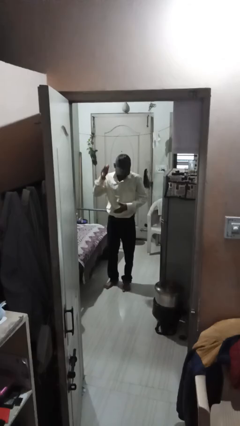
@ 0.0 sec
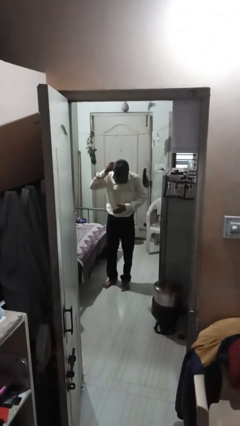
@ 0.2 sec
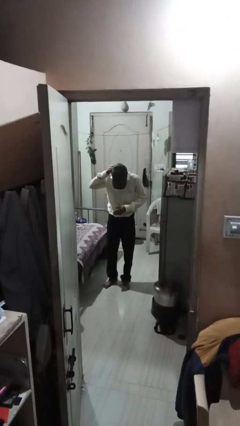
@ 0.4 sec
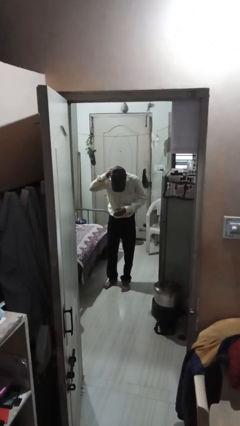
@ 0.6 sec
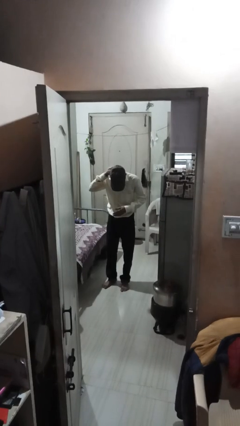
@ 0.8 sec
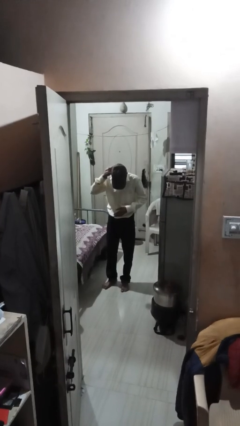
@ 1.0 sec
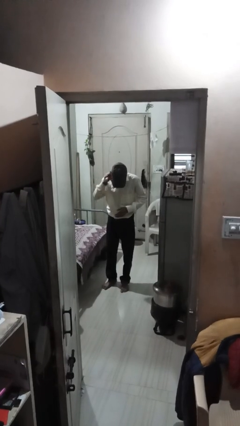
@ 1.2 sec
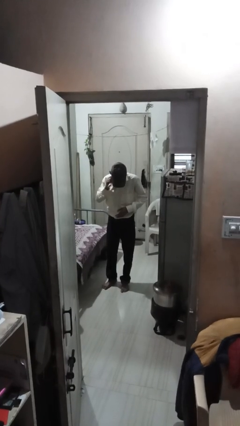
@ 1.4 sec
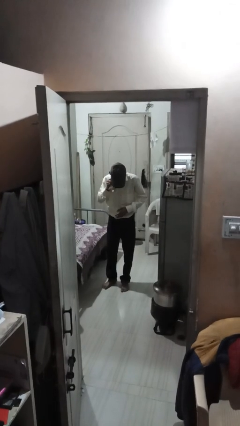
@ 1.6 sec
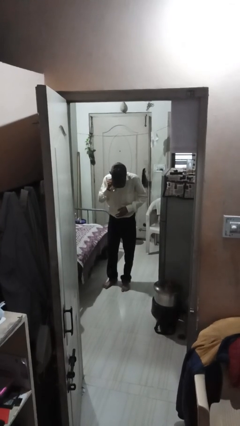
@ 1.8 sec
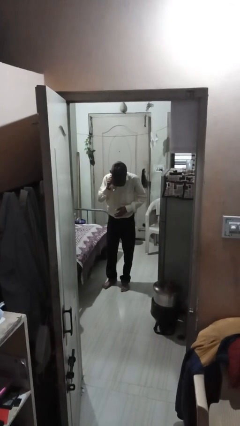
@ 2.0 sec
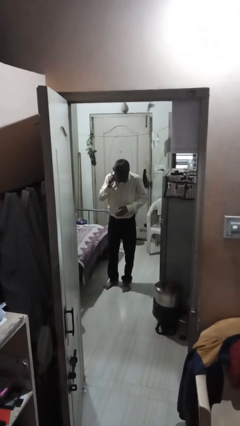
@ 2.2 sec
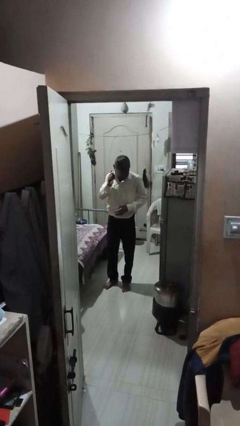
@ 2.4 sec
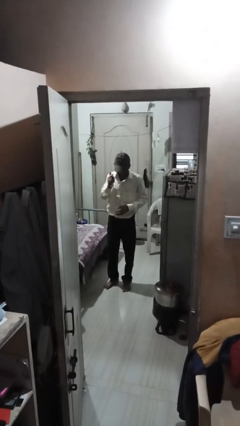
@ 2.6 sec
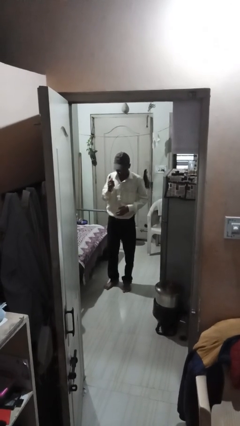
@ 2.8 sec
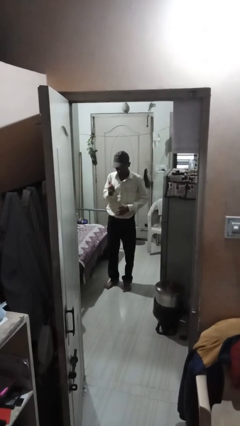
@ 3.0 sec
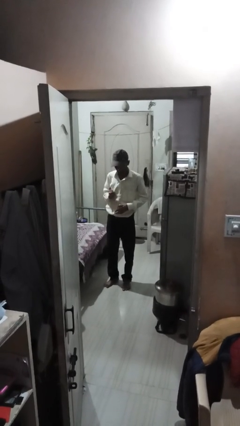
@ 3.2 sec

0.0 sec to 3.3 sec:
person applies deodorant

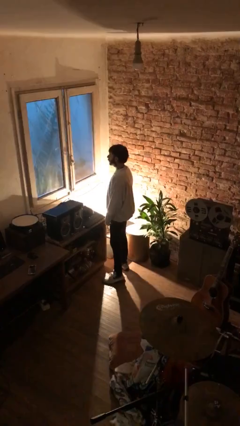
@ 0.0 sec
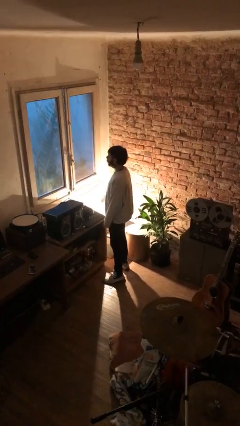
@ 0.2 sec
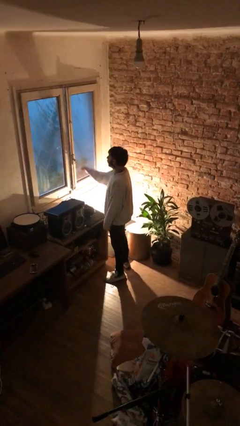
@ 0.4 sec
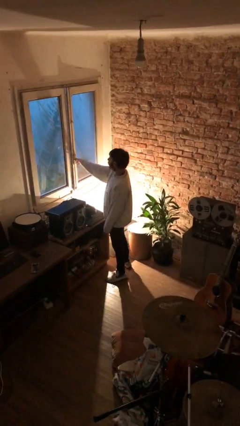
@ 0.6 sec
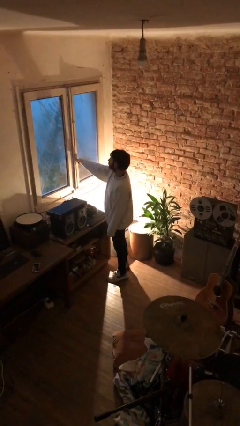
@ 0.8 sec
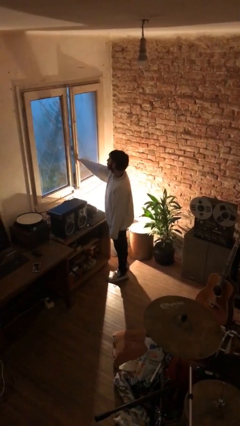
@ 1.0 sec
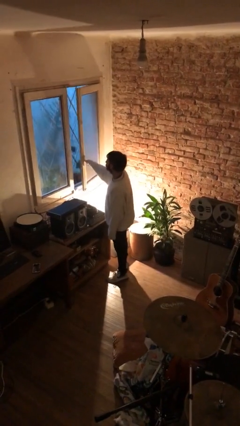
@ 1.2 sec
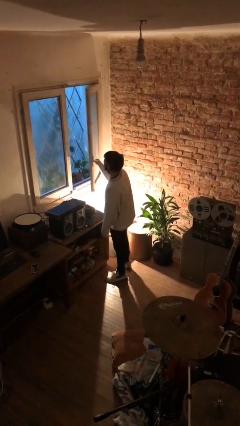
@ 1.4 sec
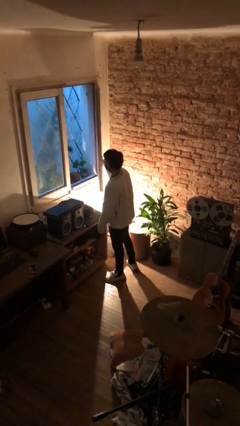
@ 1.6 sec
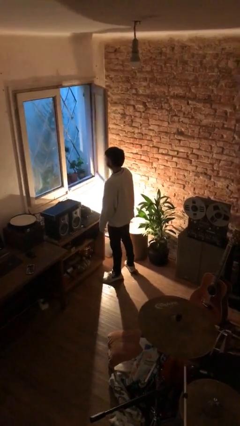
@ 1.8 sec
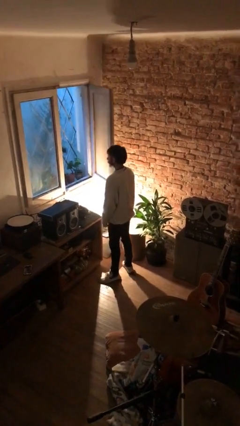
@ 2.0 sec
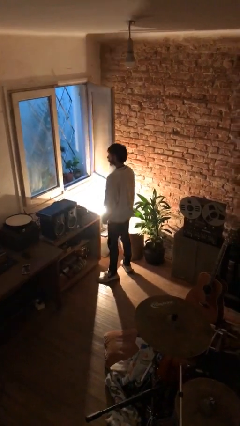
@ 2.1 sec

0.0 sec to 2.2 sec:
person opens home window

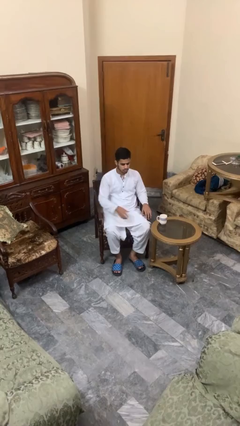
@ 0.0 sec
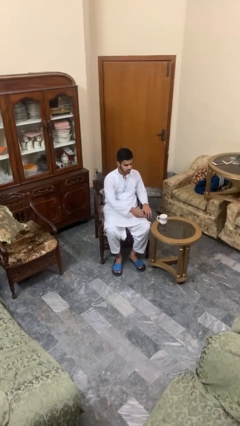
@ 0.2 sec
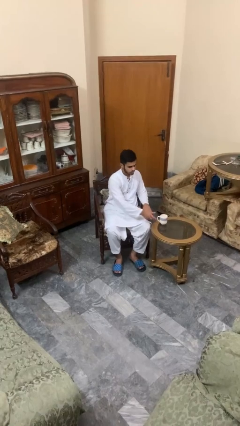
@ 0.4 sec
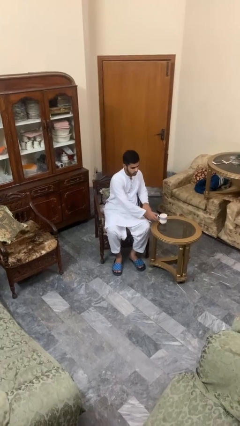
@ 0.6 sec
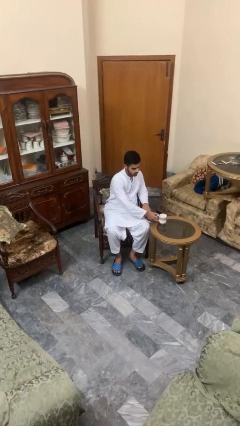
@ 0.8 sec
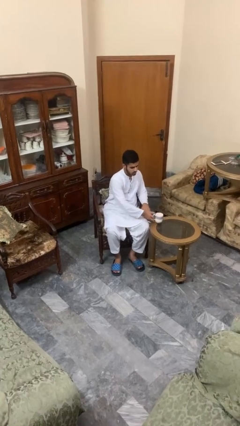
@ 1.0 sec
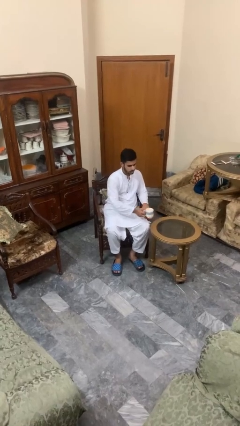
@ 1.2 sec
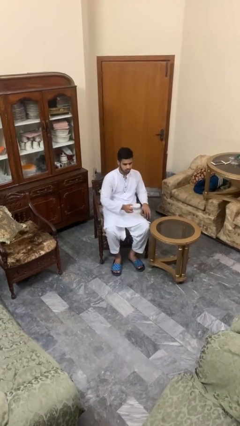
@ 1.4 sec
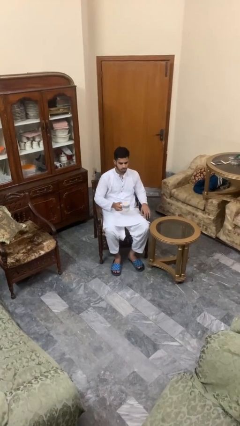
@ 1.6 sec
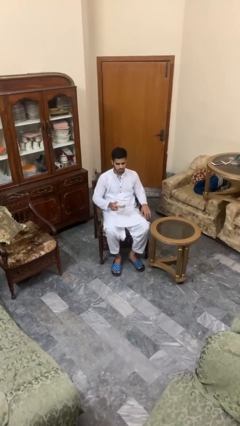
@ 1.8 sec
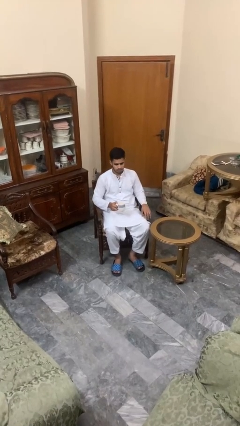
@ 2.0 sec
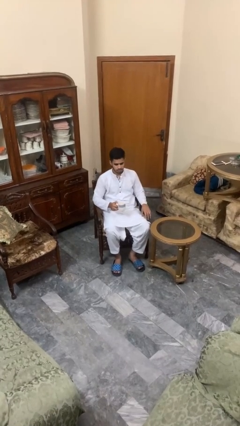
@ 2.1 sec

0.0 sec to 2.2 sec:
person picks up object from table

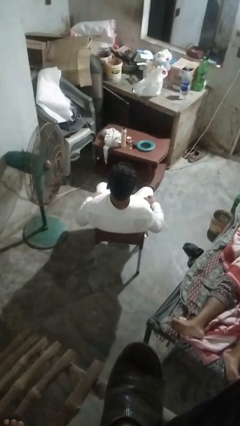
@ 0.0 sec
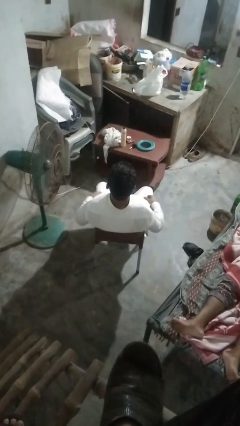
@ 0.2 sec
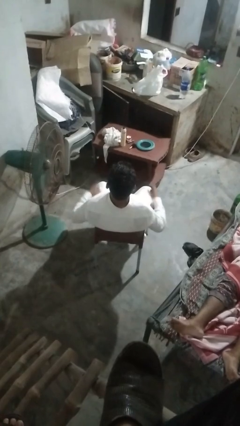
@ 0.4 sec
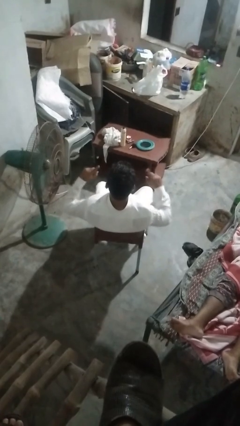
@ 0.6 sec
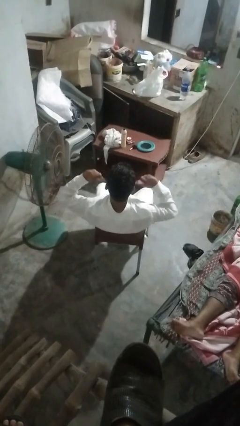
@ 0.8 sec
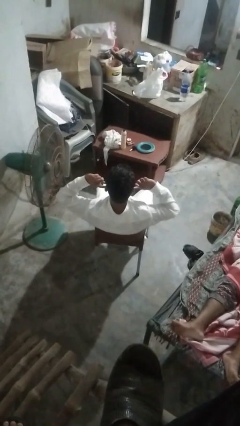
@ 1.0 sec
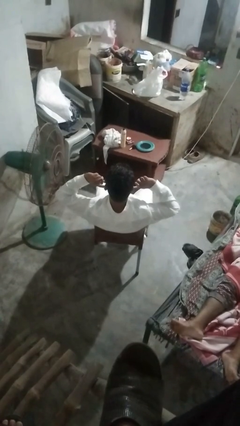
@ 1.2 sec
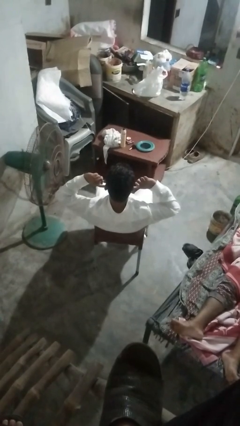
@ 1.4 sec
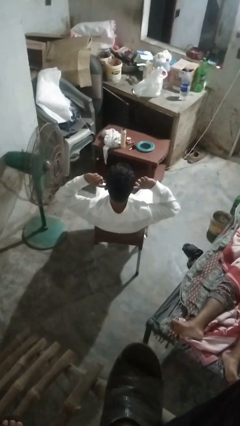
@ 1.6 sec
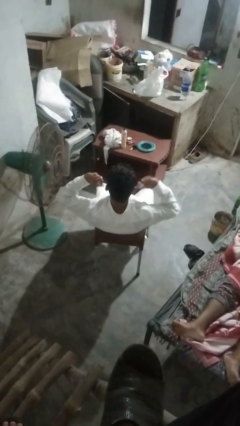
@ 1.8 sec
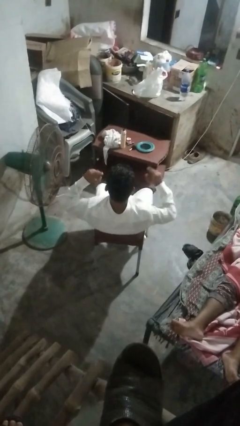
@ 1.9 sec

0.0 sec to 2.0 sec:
person puts fingers in ear

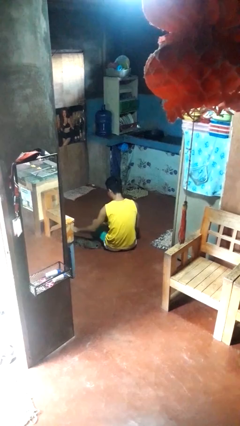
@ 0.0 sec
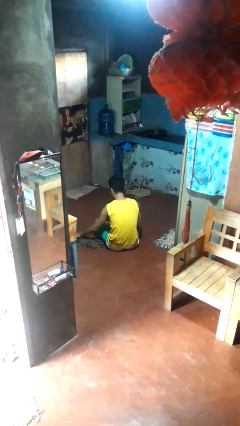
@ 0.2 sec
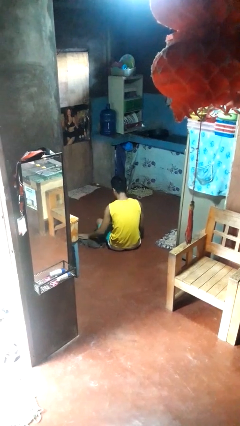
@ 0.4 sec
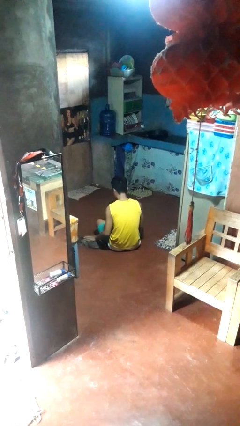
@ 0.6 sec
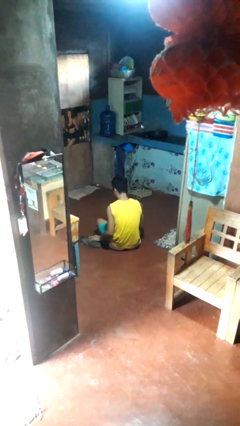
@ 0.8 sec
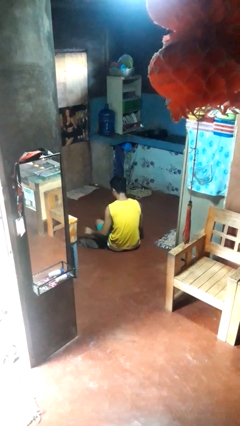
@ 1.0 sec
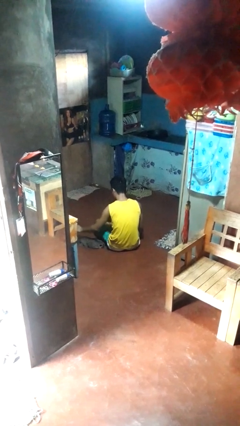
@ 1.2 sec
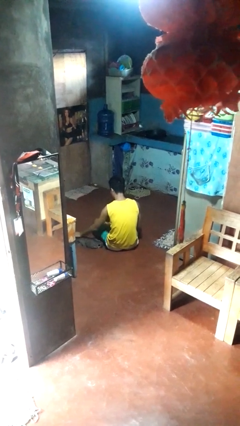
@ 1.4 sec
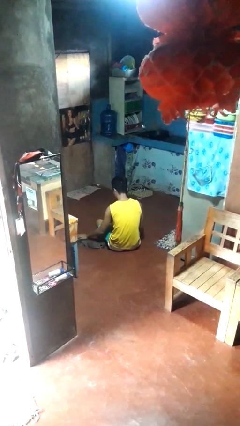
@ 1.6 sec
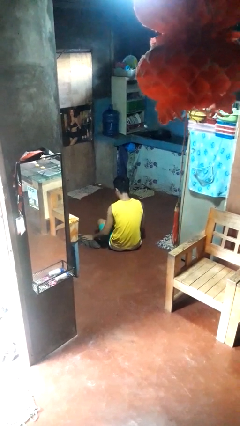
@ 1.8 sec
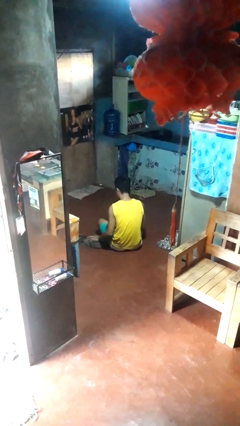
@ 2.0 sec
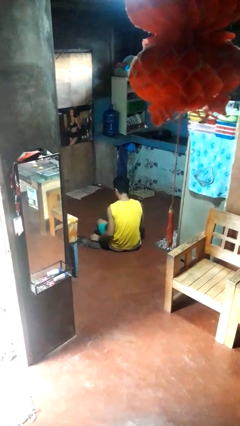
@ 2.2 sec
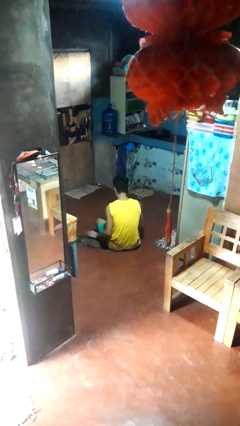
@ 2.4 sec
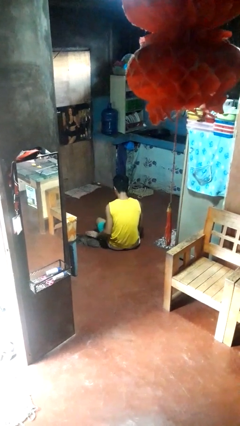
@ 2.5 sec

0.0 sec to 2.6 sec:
person pets cat

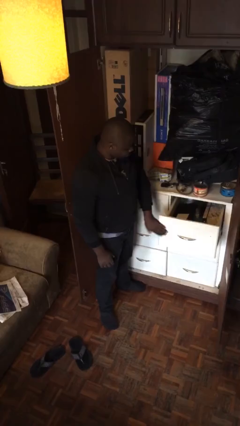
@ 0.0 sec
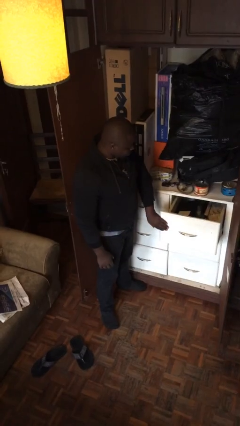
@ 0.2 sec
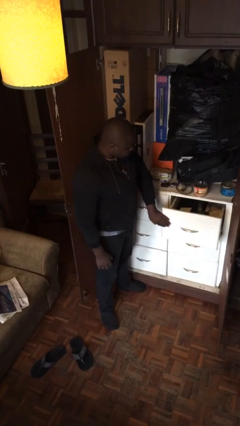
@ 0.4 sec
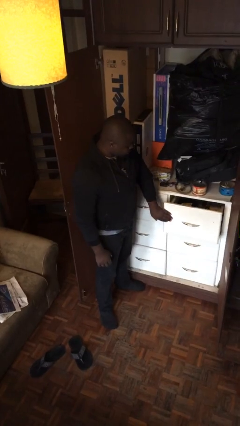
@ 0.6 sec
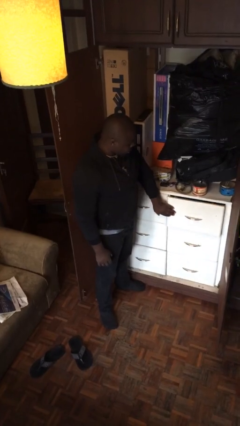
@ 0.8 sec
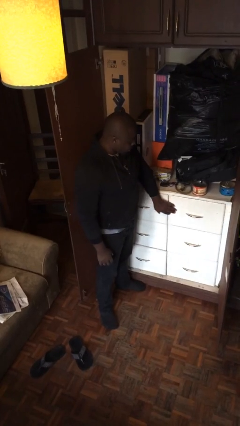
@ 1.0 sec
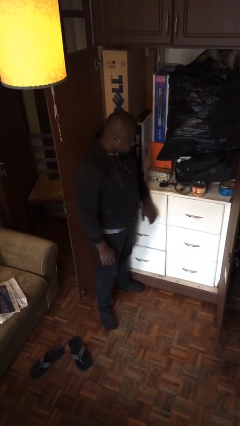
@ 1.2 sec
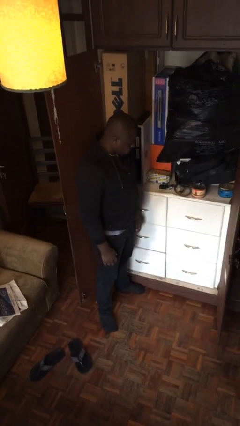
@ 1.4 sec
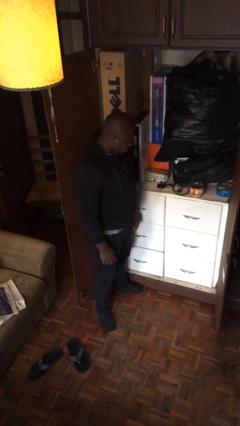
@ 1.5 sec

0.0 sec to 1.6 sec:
person closes dresser drawer

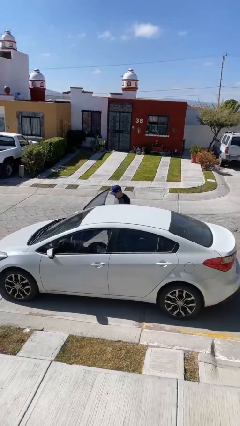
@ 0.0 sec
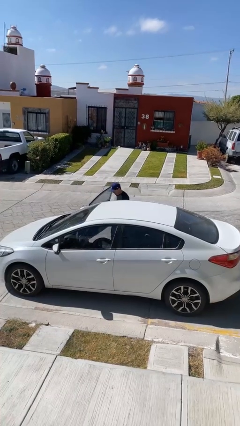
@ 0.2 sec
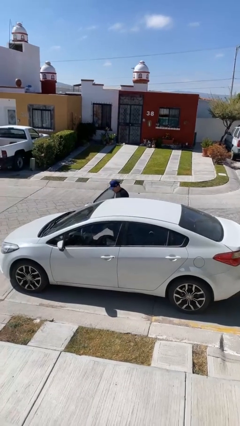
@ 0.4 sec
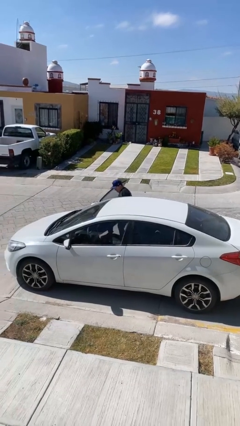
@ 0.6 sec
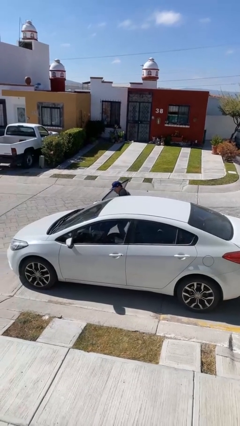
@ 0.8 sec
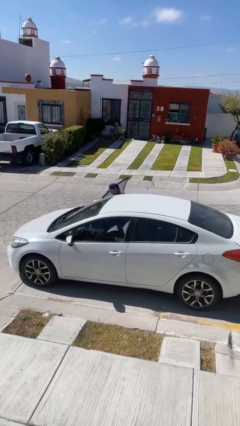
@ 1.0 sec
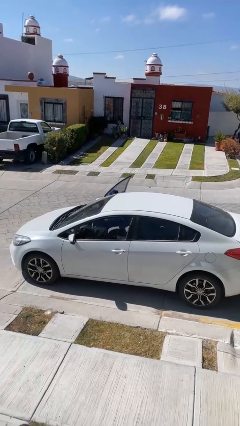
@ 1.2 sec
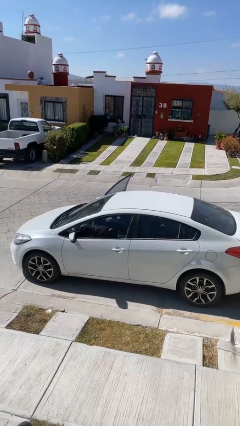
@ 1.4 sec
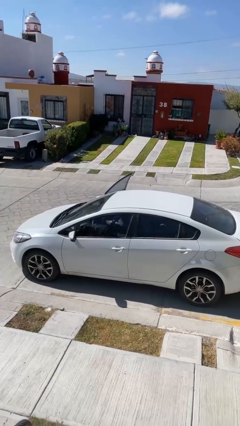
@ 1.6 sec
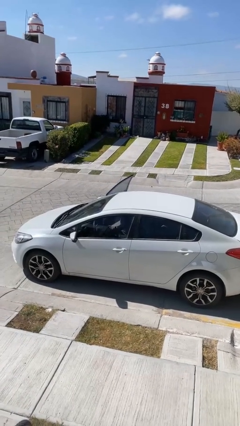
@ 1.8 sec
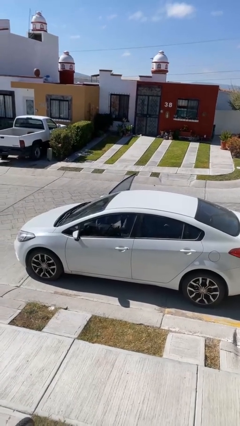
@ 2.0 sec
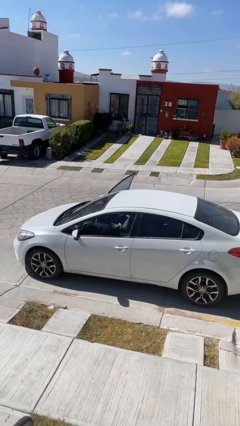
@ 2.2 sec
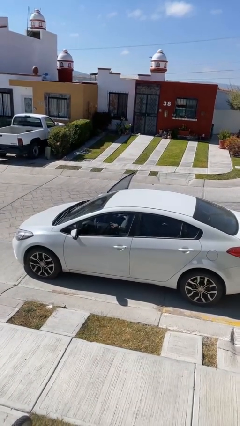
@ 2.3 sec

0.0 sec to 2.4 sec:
person enters car

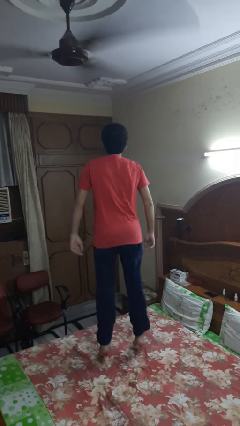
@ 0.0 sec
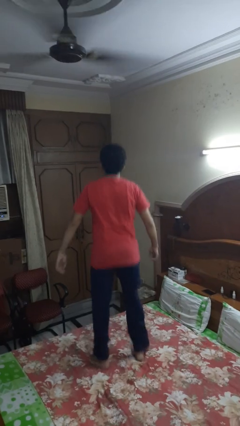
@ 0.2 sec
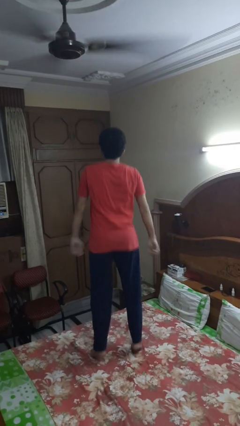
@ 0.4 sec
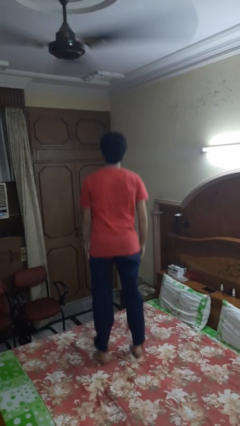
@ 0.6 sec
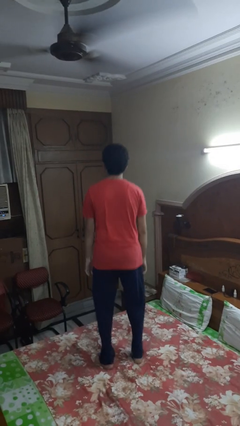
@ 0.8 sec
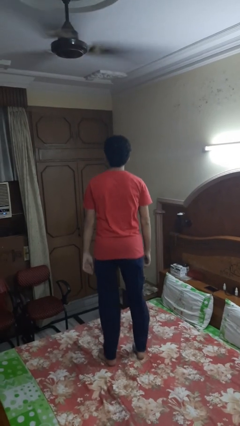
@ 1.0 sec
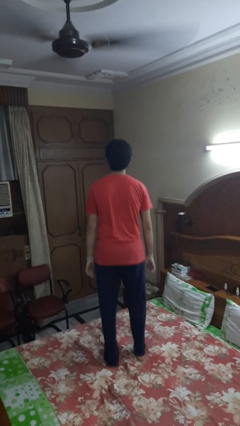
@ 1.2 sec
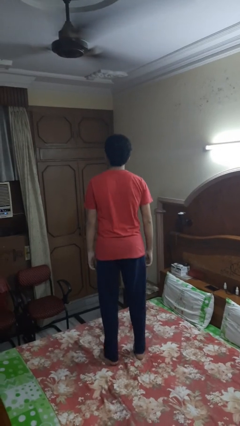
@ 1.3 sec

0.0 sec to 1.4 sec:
person jumps on bed
